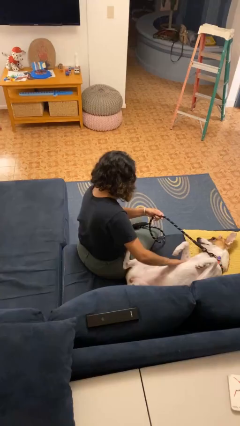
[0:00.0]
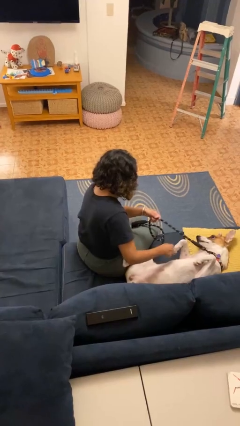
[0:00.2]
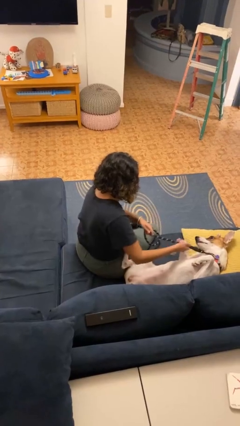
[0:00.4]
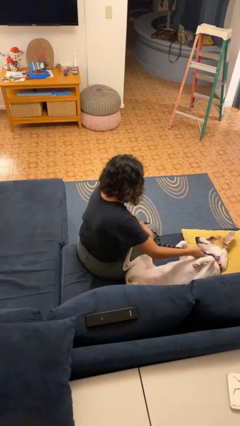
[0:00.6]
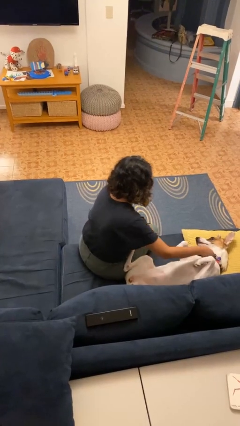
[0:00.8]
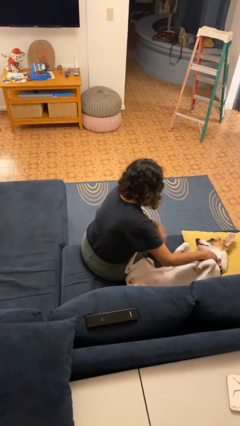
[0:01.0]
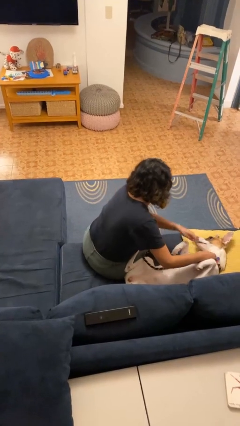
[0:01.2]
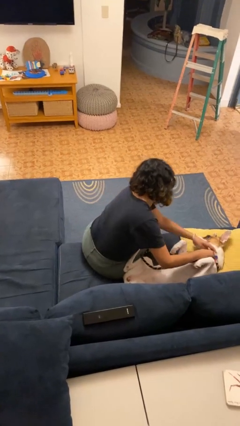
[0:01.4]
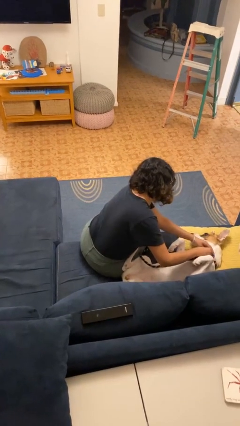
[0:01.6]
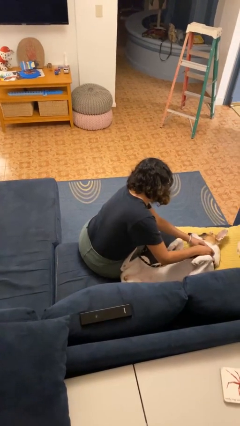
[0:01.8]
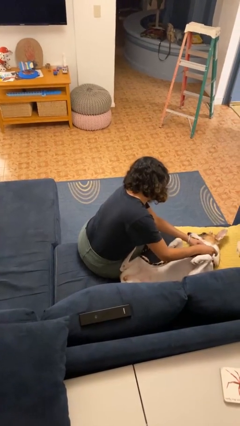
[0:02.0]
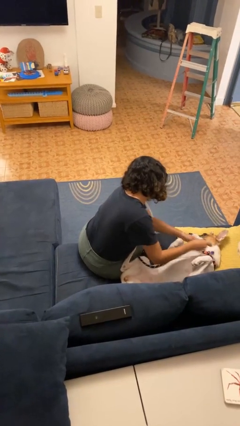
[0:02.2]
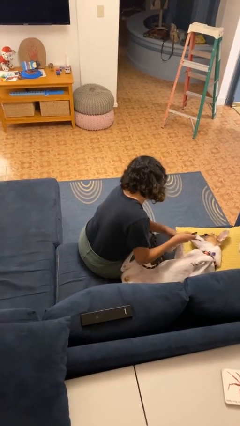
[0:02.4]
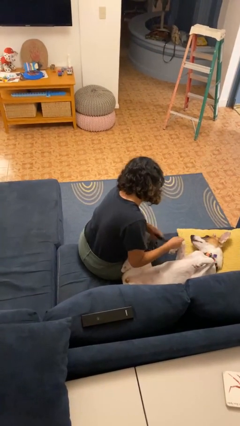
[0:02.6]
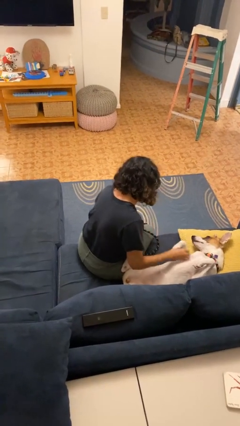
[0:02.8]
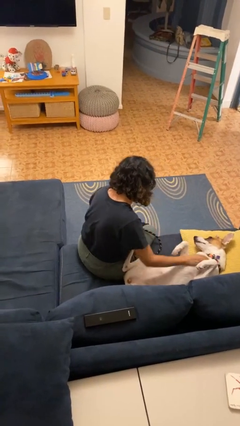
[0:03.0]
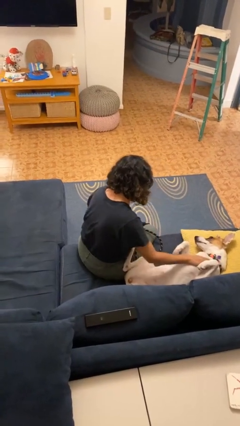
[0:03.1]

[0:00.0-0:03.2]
person unattaches leash from dog

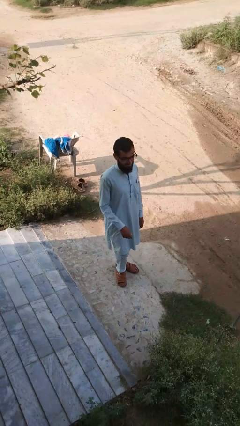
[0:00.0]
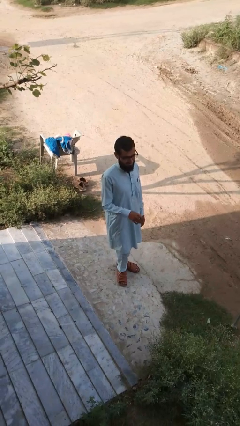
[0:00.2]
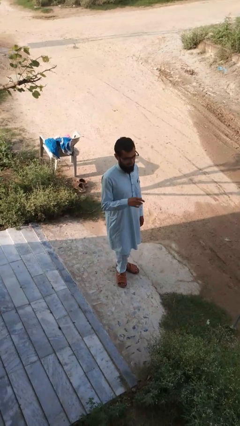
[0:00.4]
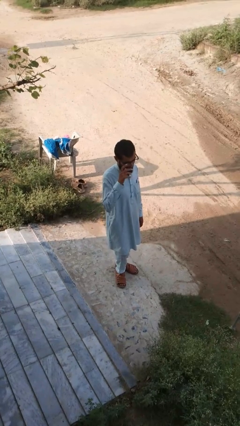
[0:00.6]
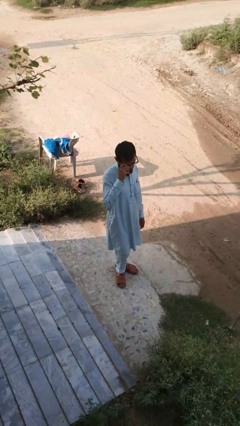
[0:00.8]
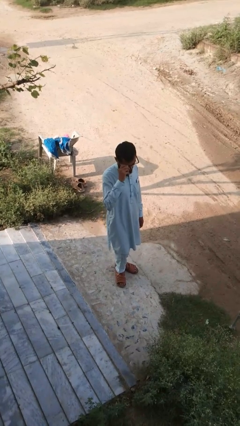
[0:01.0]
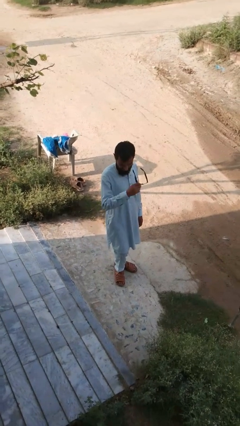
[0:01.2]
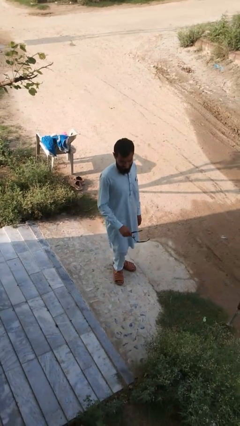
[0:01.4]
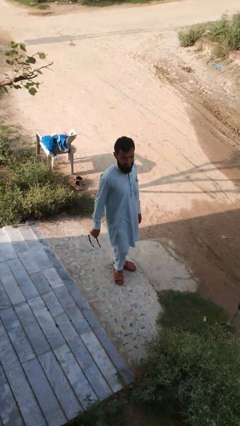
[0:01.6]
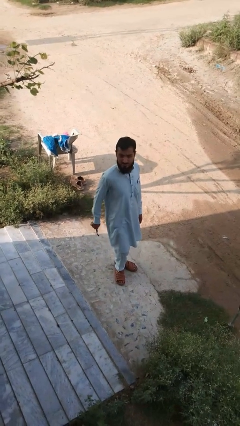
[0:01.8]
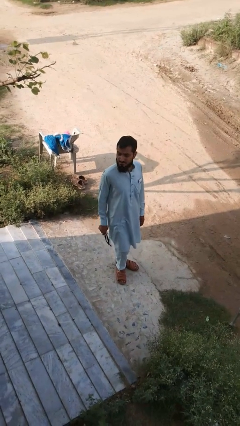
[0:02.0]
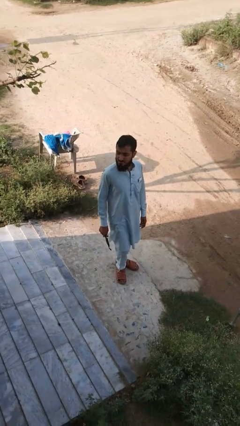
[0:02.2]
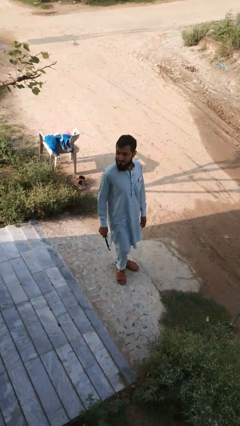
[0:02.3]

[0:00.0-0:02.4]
person takes off glasses

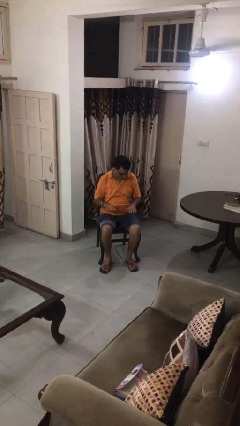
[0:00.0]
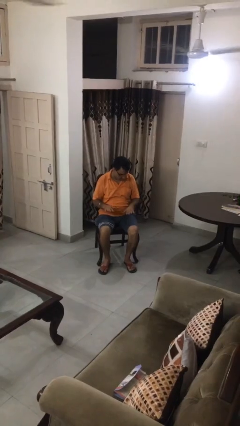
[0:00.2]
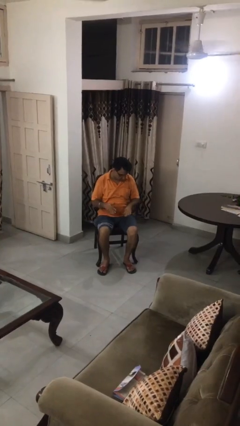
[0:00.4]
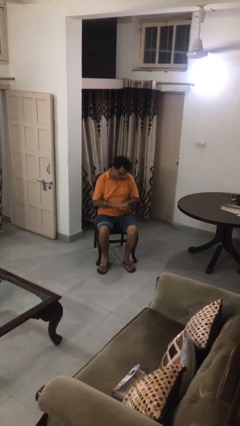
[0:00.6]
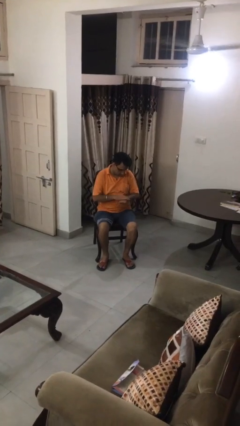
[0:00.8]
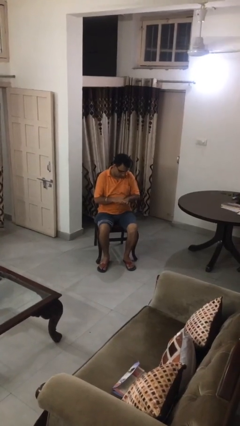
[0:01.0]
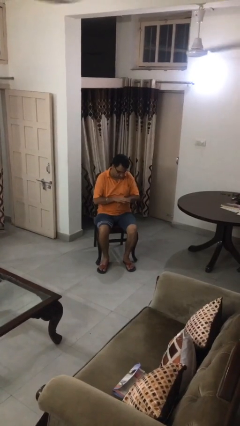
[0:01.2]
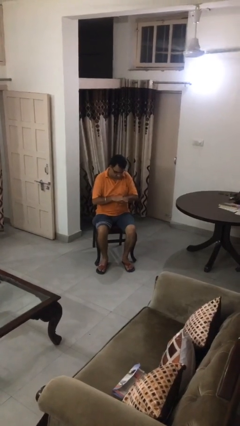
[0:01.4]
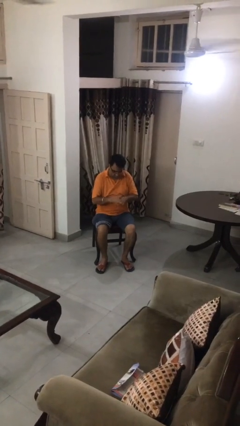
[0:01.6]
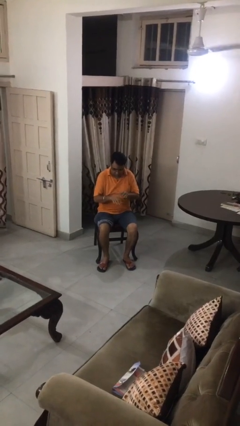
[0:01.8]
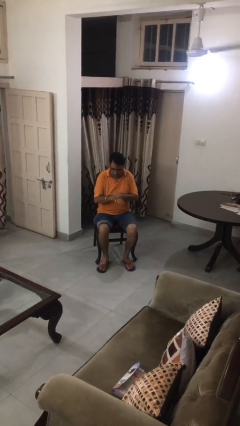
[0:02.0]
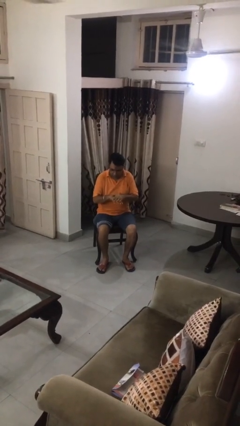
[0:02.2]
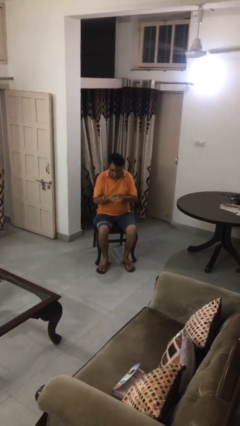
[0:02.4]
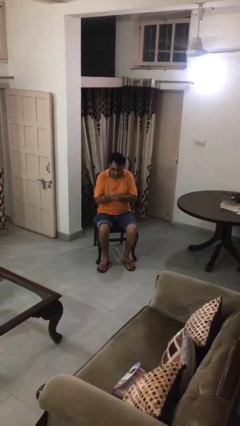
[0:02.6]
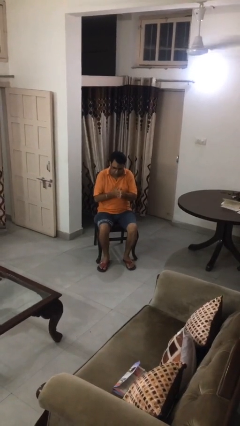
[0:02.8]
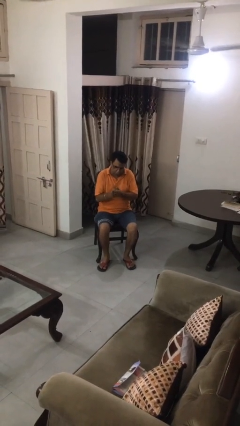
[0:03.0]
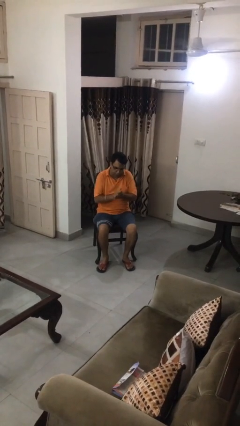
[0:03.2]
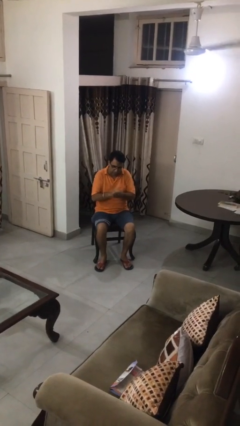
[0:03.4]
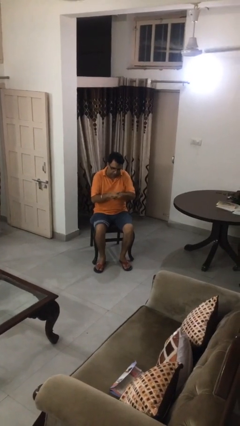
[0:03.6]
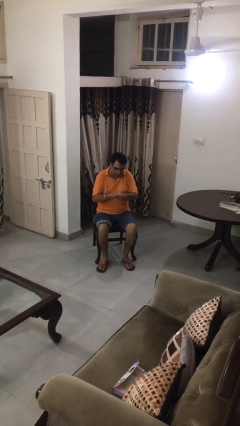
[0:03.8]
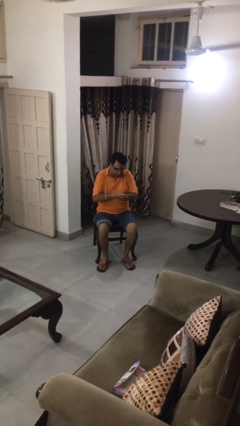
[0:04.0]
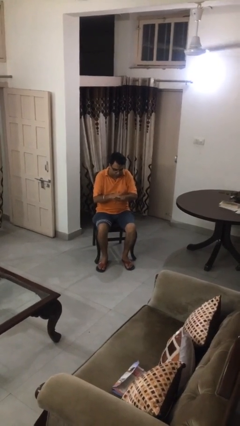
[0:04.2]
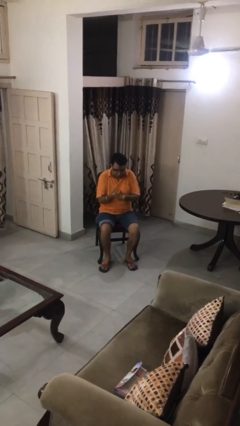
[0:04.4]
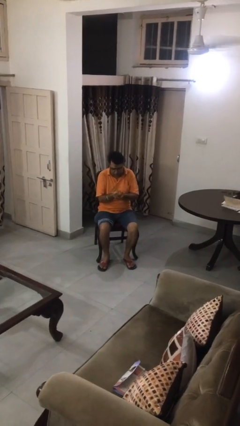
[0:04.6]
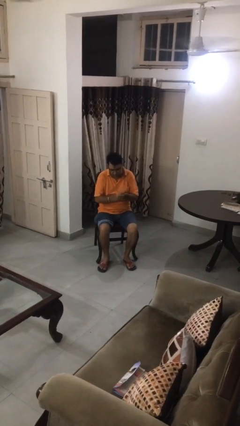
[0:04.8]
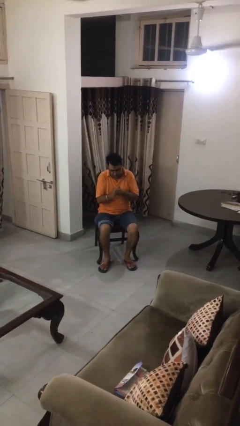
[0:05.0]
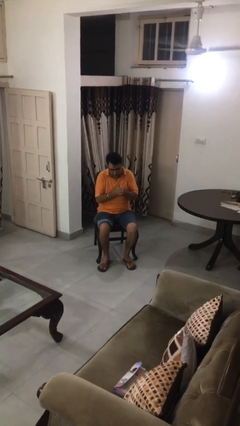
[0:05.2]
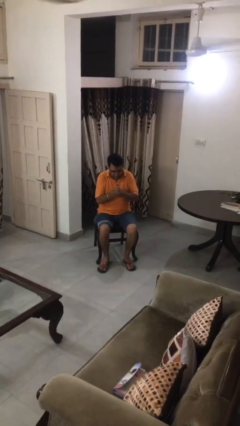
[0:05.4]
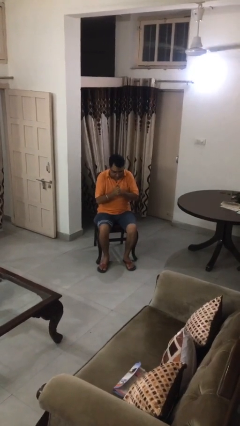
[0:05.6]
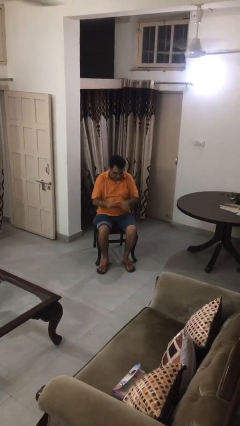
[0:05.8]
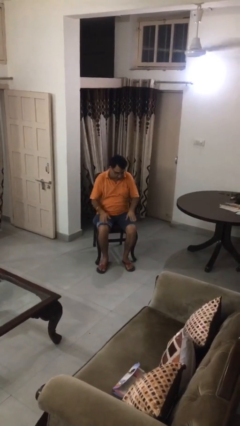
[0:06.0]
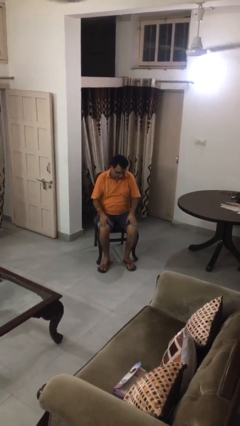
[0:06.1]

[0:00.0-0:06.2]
person looks at hands in lap

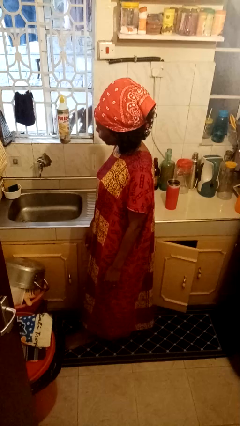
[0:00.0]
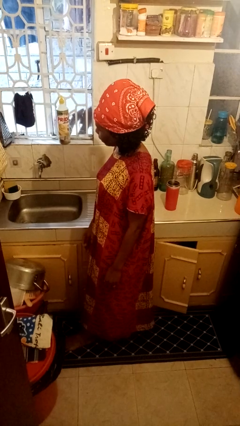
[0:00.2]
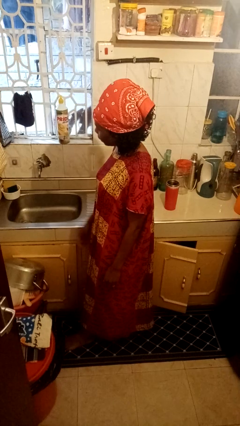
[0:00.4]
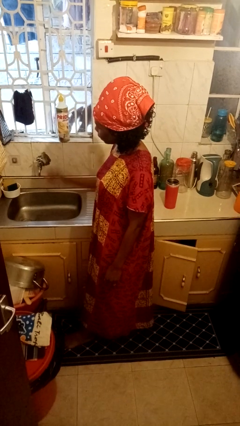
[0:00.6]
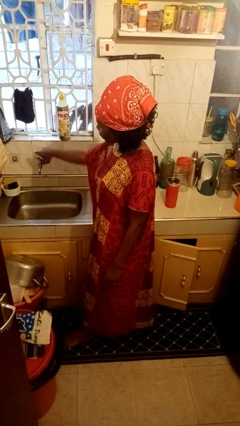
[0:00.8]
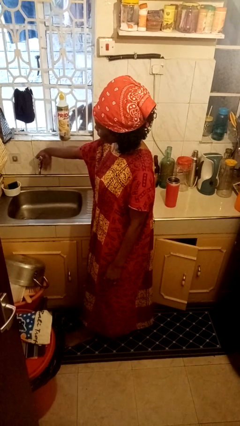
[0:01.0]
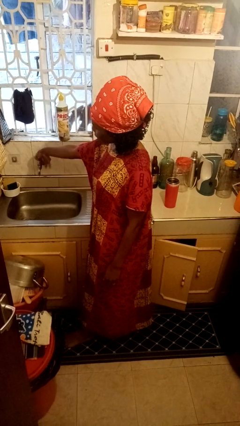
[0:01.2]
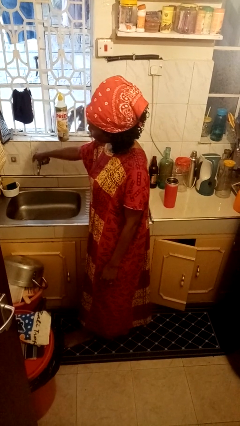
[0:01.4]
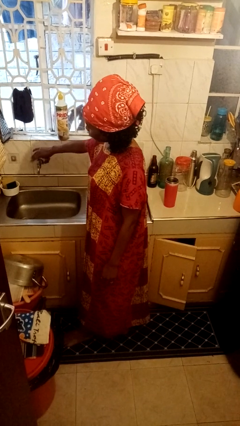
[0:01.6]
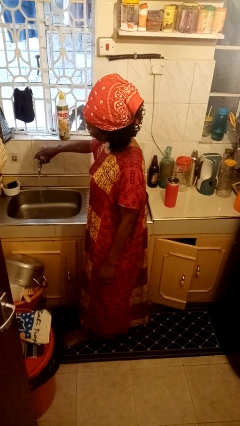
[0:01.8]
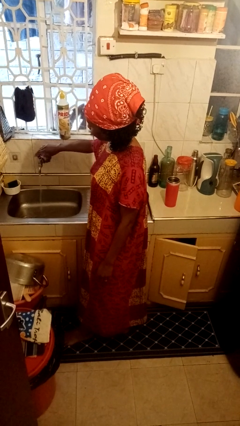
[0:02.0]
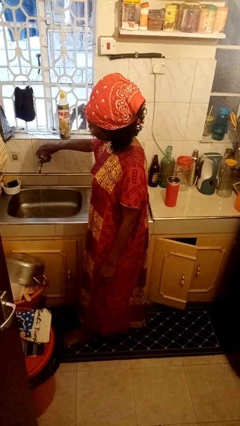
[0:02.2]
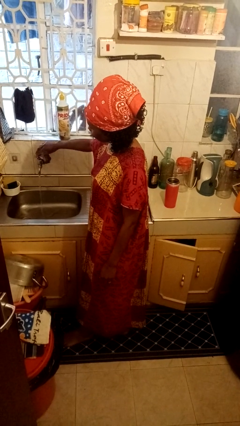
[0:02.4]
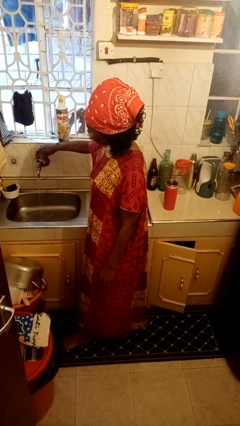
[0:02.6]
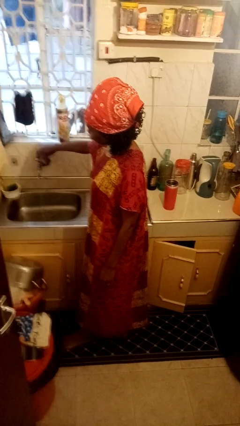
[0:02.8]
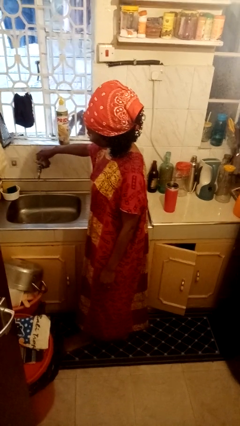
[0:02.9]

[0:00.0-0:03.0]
person turns on faucet

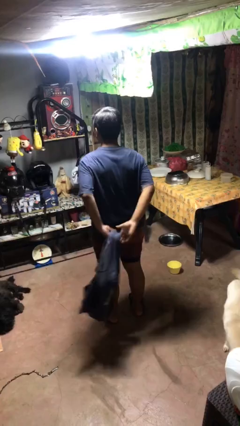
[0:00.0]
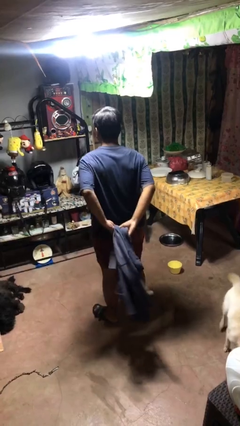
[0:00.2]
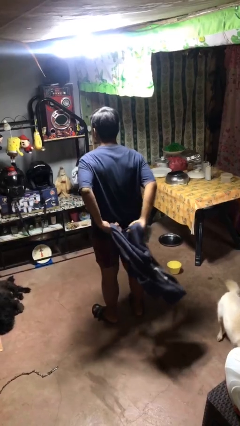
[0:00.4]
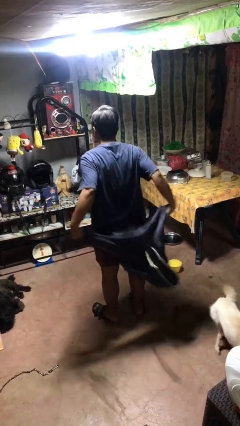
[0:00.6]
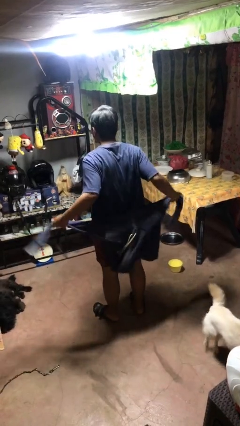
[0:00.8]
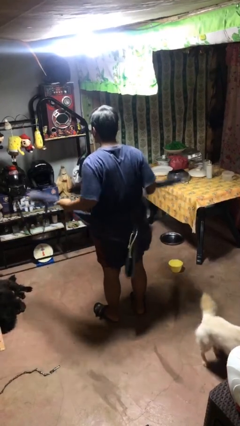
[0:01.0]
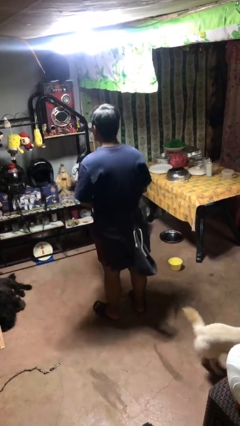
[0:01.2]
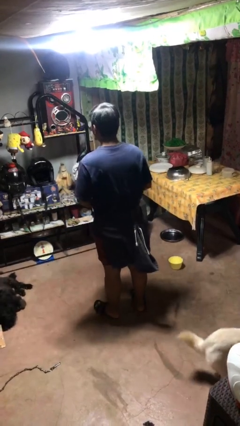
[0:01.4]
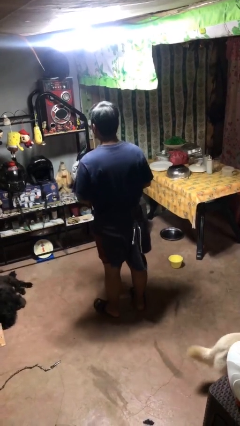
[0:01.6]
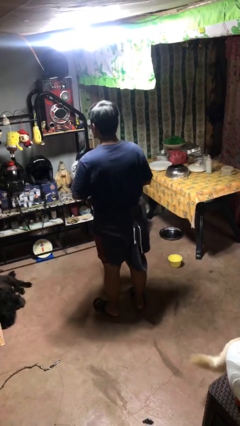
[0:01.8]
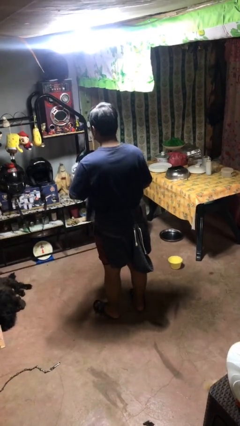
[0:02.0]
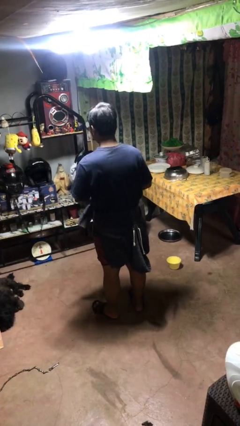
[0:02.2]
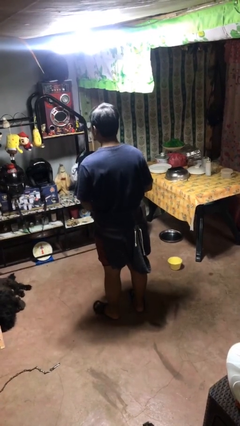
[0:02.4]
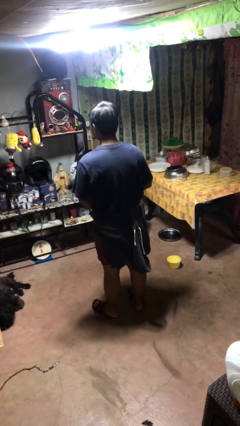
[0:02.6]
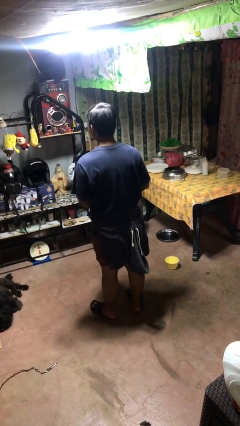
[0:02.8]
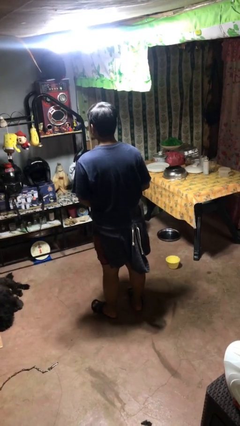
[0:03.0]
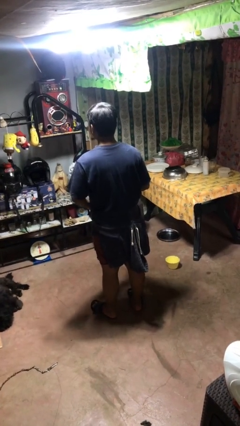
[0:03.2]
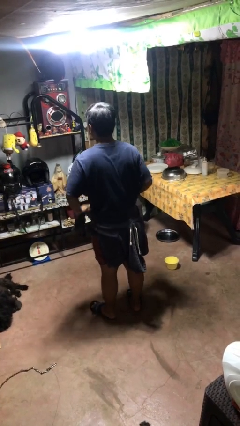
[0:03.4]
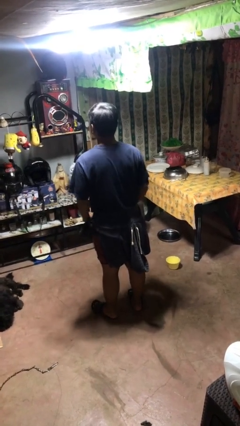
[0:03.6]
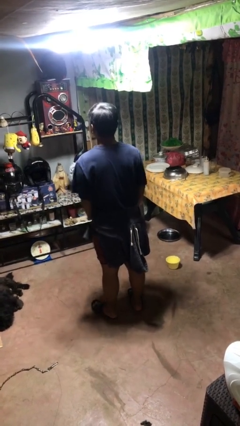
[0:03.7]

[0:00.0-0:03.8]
person ties jacket around waist
